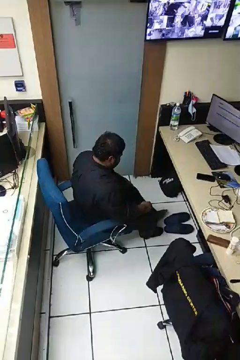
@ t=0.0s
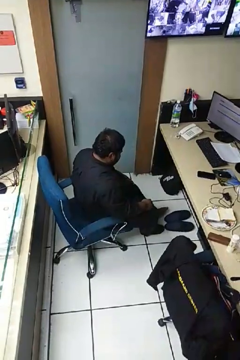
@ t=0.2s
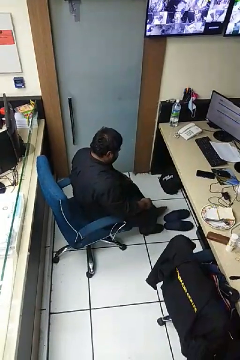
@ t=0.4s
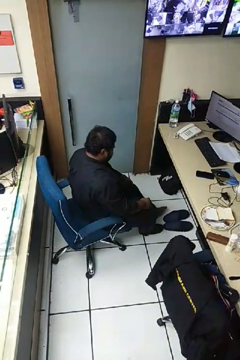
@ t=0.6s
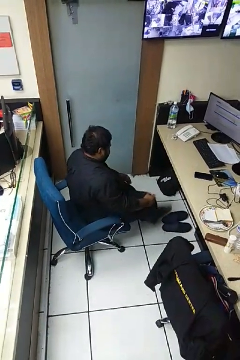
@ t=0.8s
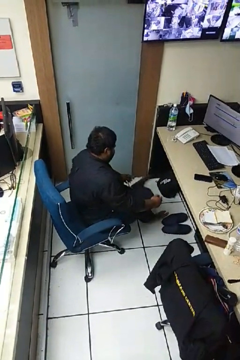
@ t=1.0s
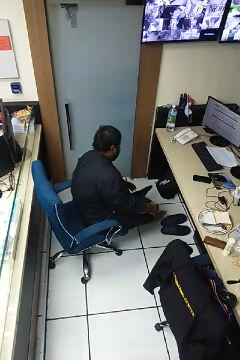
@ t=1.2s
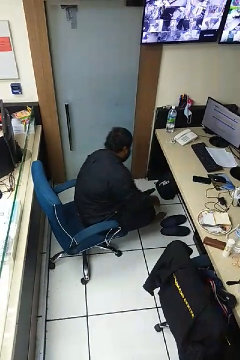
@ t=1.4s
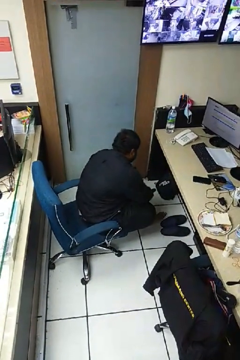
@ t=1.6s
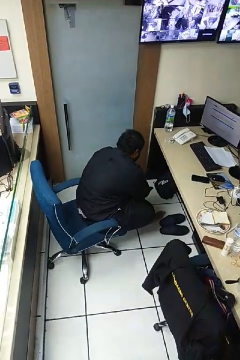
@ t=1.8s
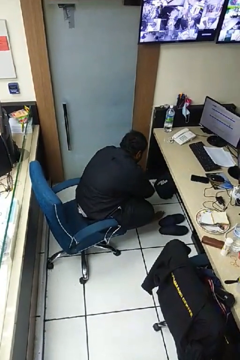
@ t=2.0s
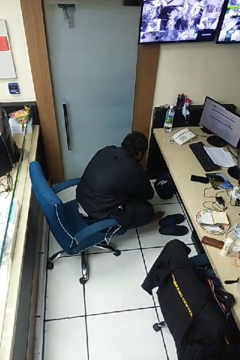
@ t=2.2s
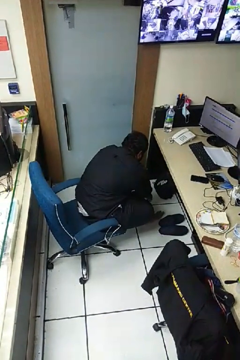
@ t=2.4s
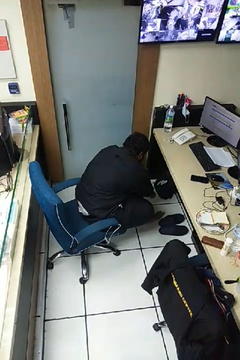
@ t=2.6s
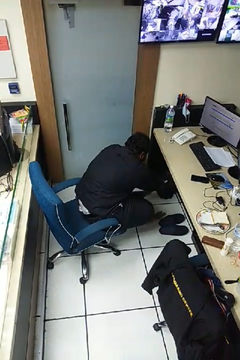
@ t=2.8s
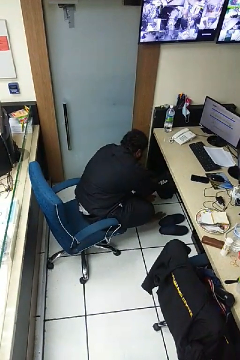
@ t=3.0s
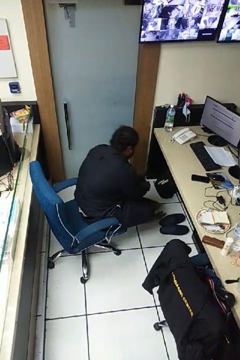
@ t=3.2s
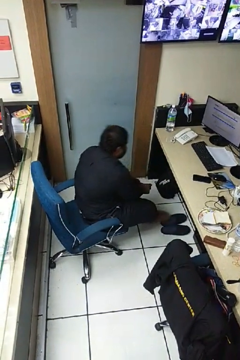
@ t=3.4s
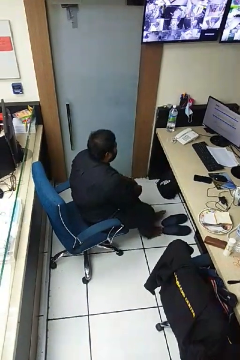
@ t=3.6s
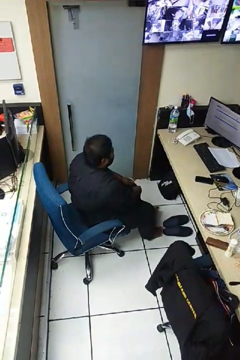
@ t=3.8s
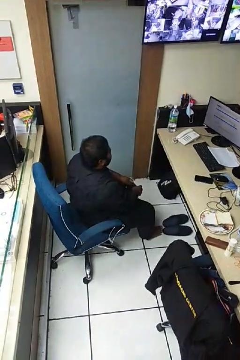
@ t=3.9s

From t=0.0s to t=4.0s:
person takes off socks

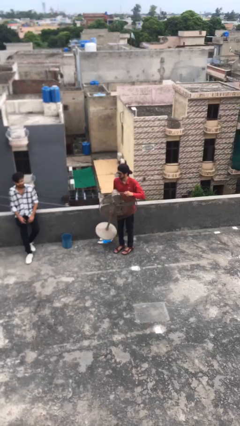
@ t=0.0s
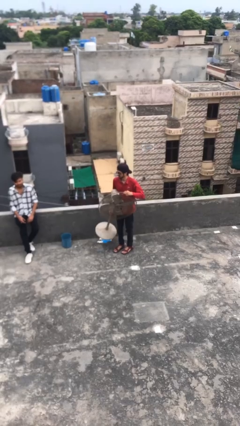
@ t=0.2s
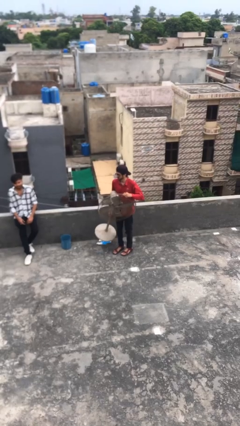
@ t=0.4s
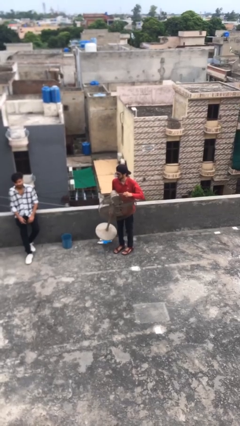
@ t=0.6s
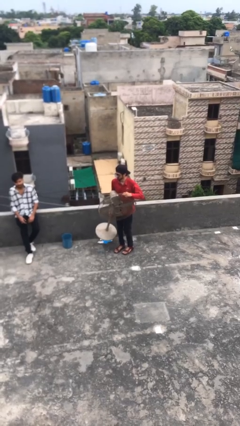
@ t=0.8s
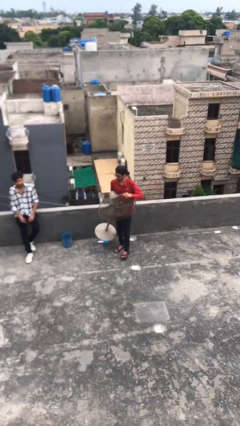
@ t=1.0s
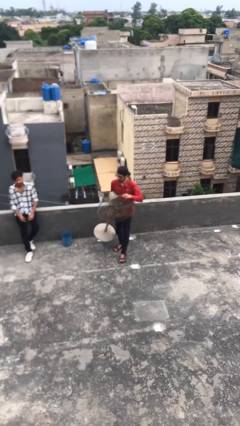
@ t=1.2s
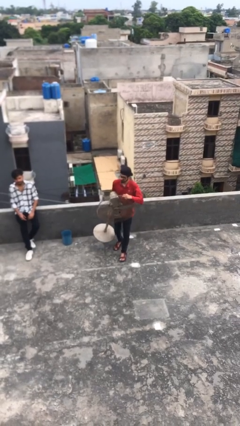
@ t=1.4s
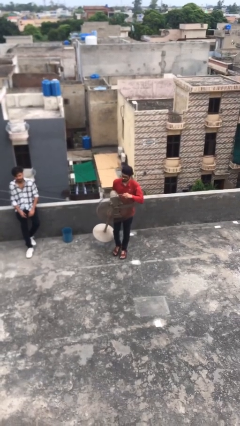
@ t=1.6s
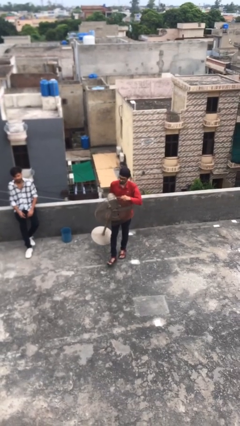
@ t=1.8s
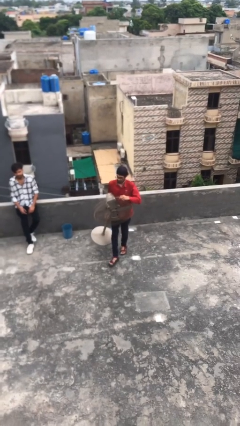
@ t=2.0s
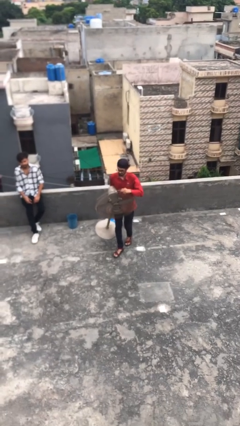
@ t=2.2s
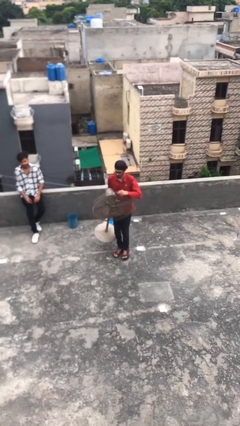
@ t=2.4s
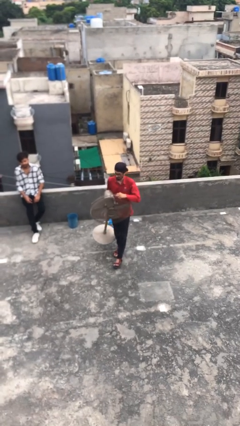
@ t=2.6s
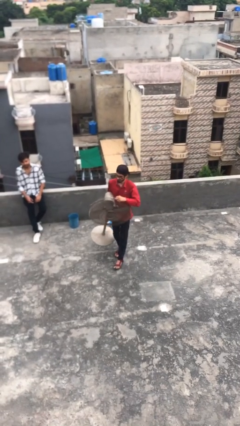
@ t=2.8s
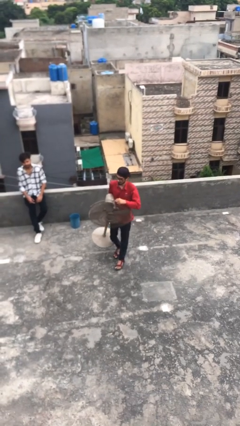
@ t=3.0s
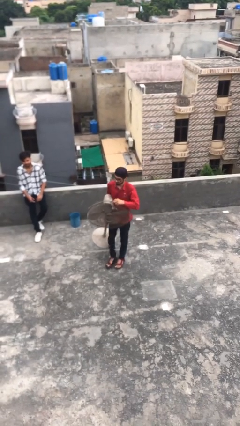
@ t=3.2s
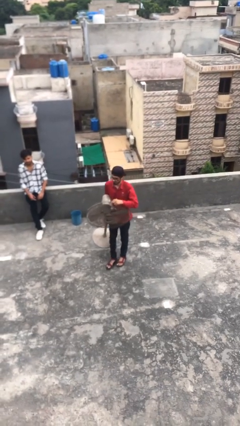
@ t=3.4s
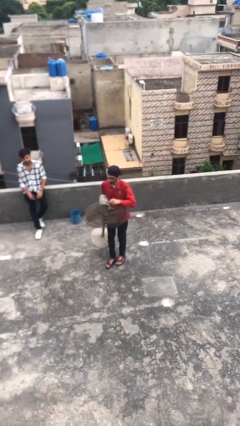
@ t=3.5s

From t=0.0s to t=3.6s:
person carries heavy object

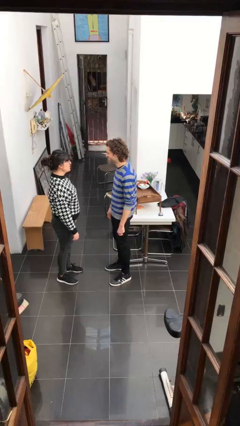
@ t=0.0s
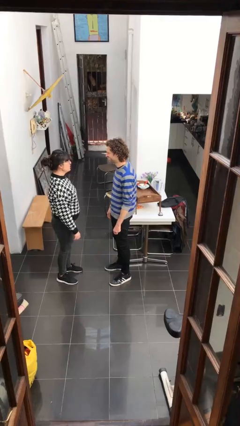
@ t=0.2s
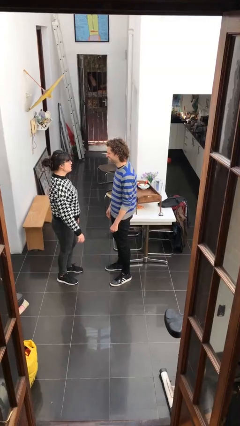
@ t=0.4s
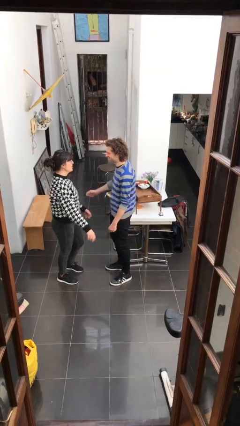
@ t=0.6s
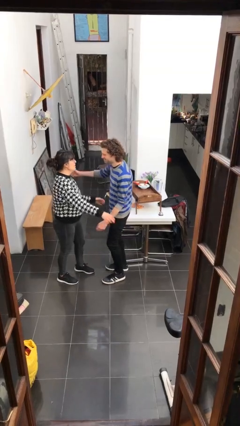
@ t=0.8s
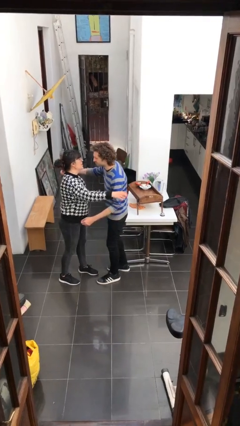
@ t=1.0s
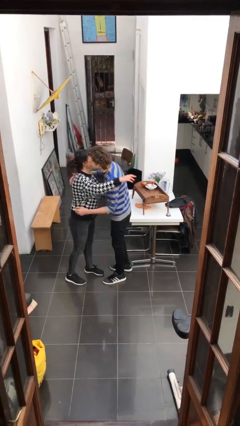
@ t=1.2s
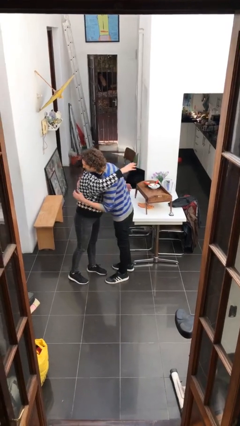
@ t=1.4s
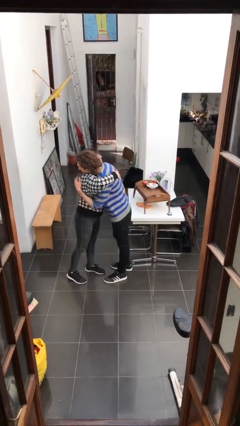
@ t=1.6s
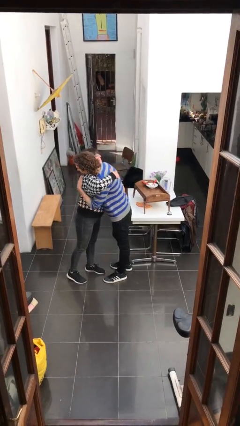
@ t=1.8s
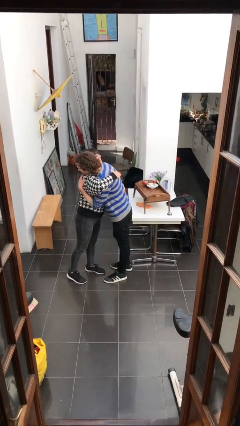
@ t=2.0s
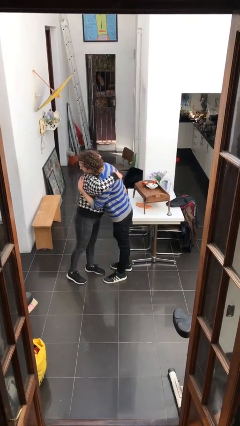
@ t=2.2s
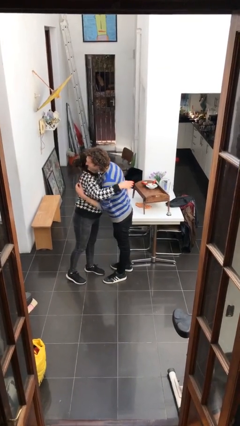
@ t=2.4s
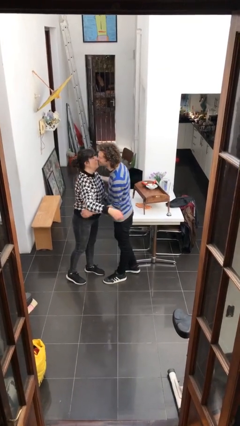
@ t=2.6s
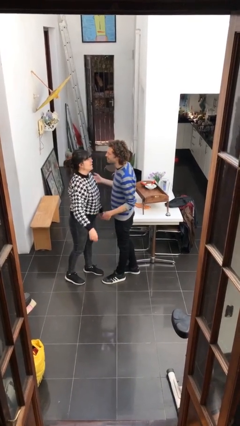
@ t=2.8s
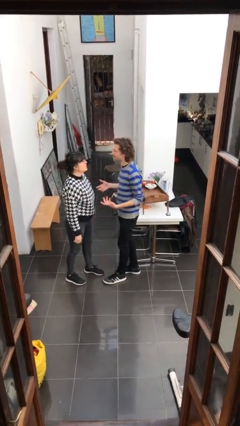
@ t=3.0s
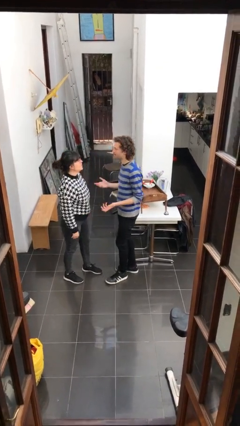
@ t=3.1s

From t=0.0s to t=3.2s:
person embraces person

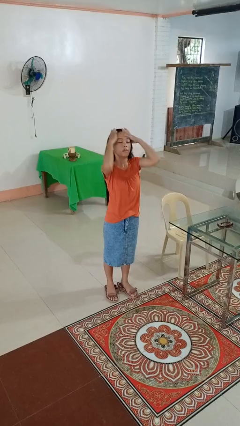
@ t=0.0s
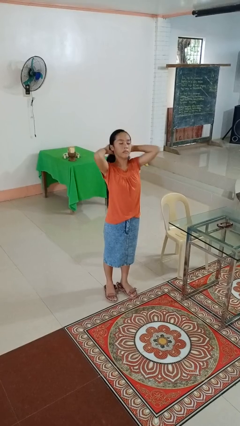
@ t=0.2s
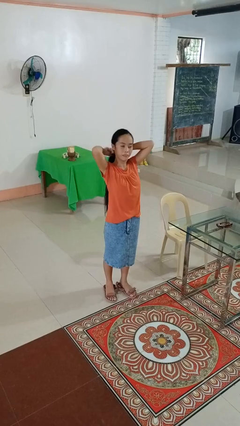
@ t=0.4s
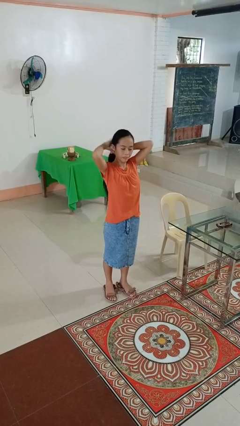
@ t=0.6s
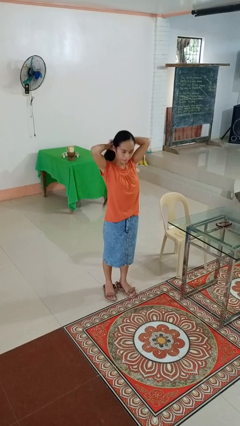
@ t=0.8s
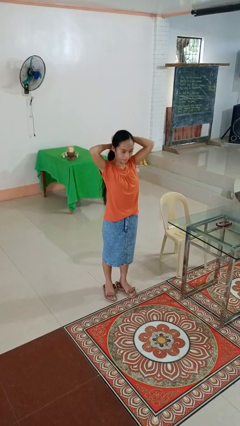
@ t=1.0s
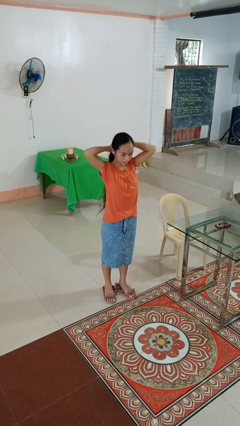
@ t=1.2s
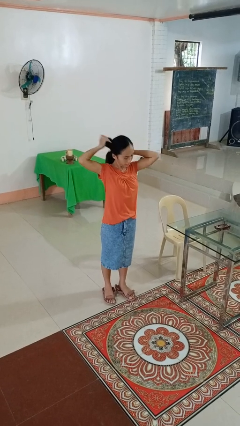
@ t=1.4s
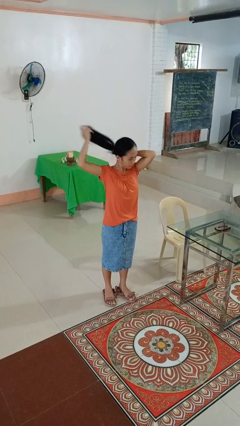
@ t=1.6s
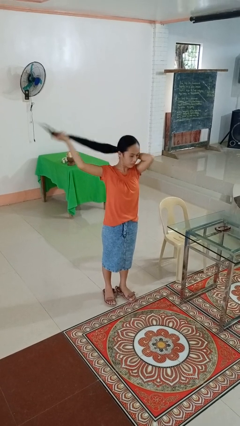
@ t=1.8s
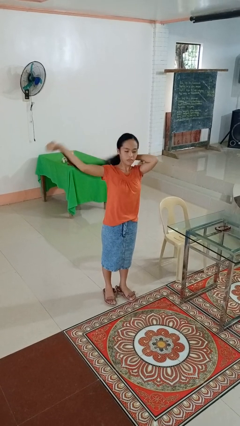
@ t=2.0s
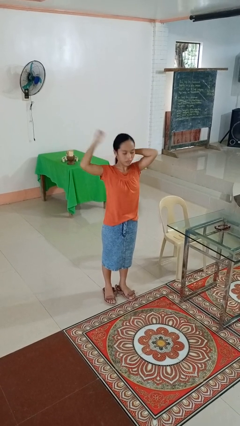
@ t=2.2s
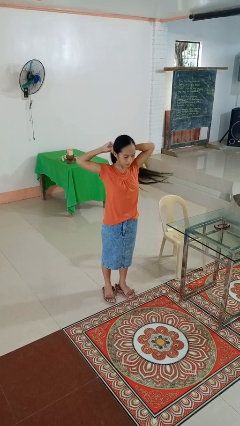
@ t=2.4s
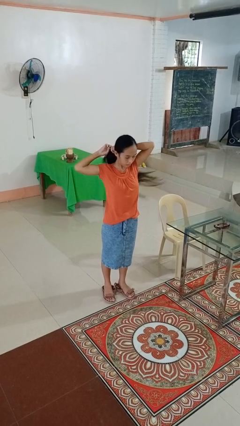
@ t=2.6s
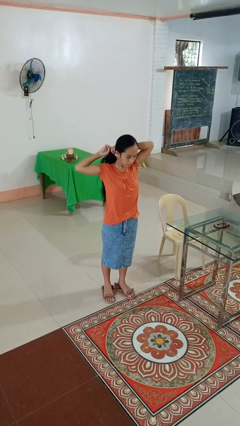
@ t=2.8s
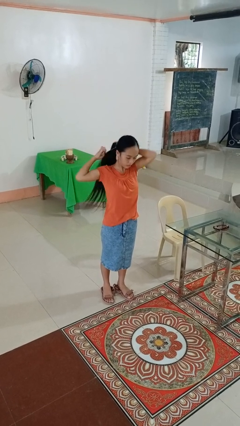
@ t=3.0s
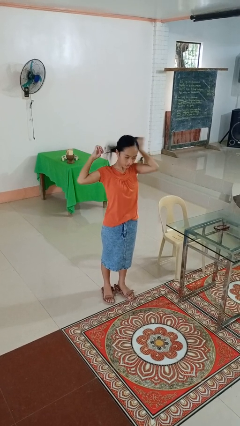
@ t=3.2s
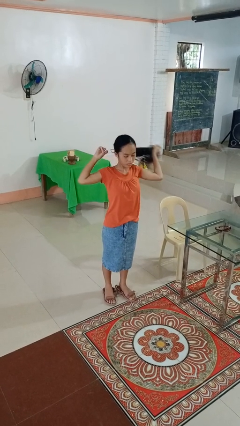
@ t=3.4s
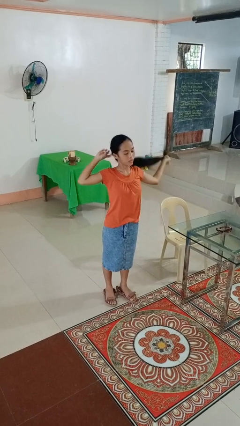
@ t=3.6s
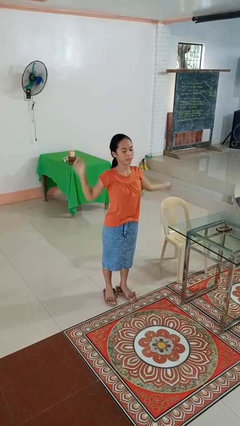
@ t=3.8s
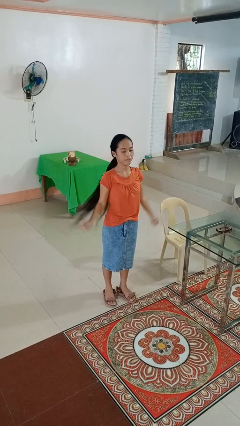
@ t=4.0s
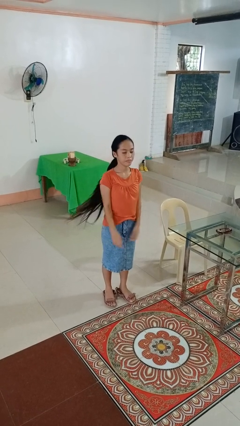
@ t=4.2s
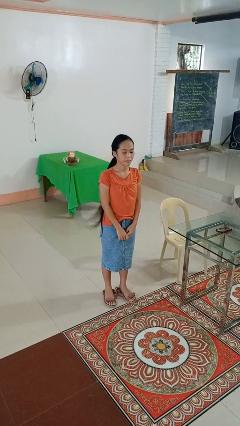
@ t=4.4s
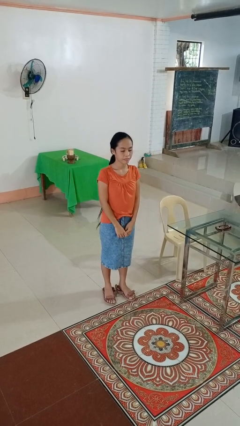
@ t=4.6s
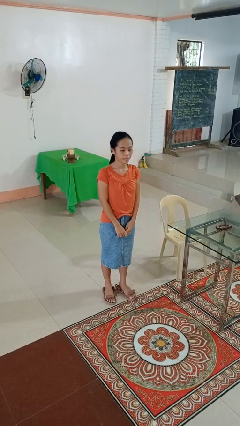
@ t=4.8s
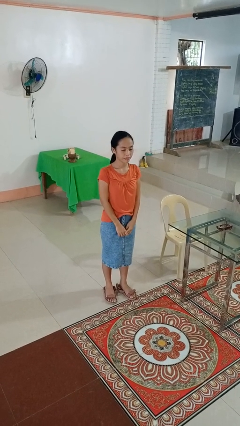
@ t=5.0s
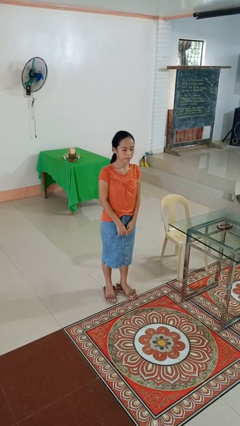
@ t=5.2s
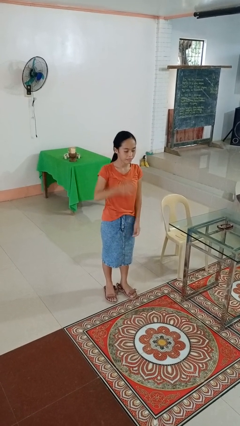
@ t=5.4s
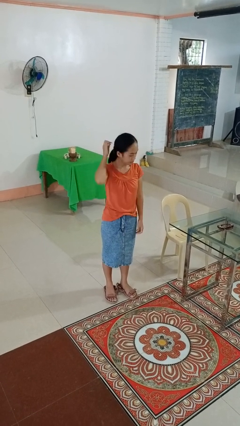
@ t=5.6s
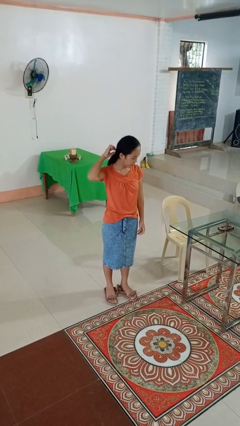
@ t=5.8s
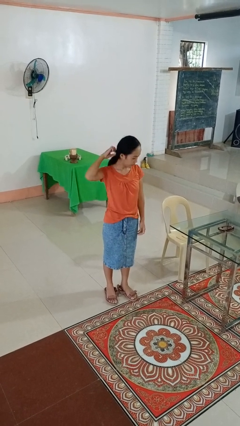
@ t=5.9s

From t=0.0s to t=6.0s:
person puts hair in ponytail

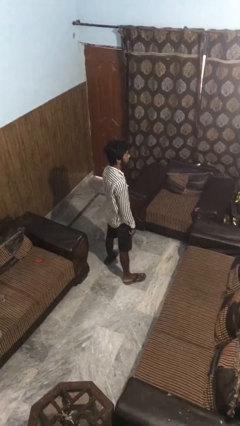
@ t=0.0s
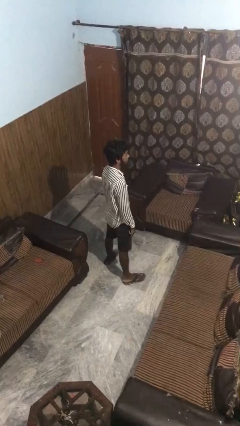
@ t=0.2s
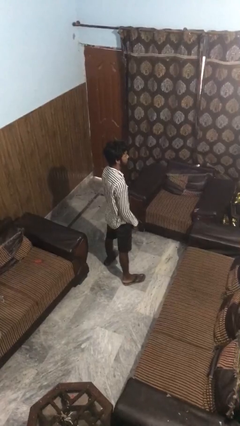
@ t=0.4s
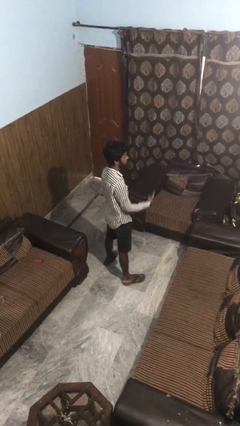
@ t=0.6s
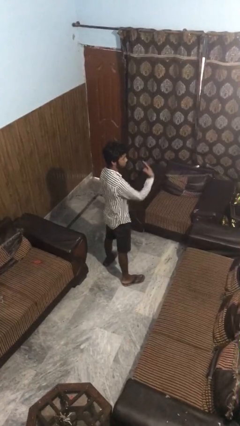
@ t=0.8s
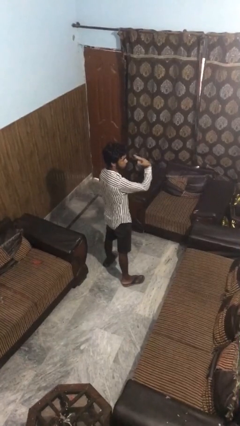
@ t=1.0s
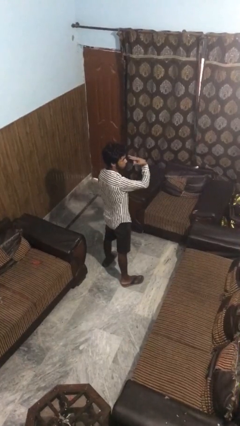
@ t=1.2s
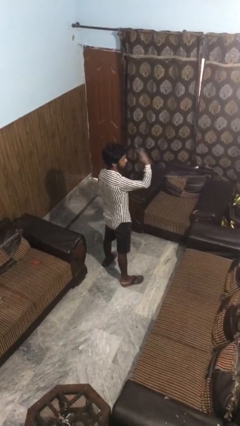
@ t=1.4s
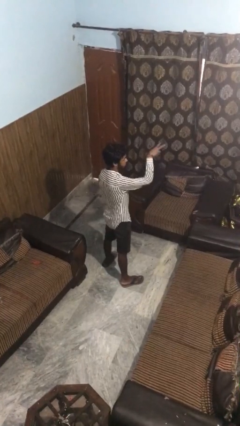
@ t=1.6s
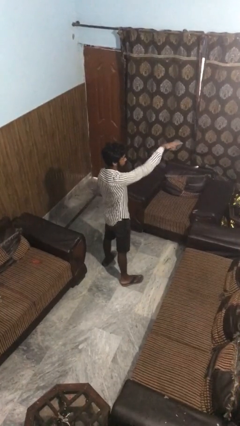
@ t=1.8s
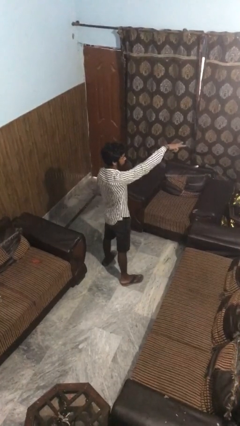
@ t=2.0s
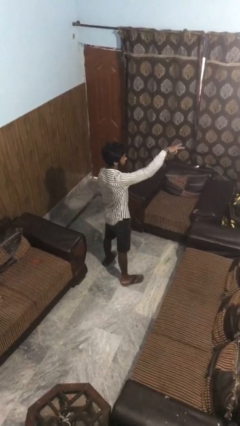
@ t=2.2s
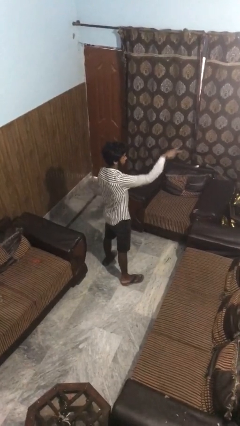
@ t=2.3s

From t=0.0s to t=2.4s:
person gestures watch closely
